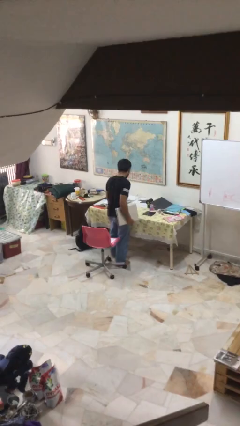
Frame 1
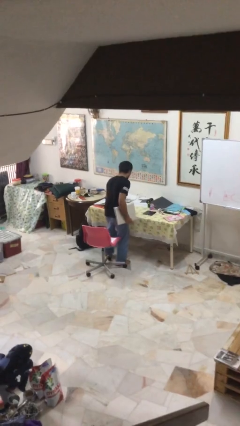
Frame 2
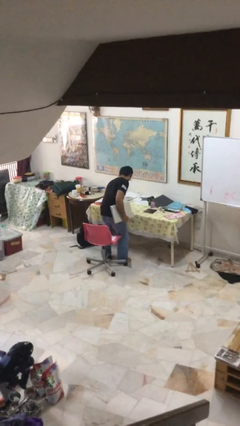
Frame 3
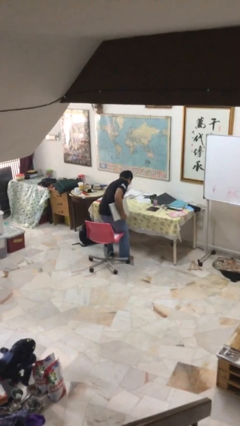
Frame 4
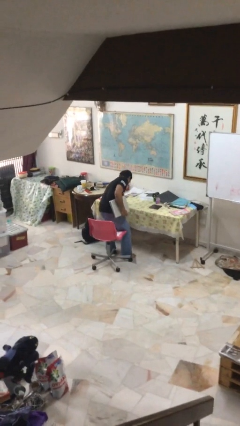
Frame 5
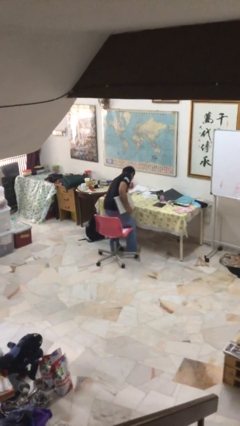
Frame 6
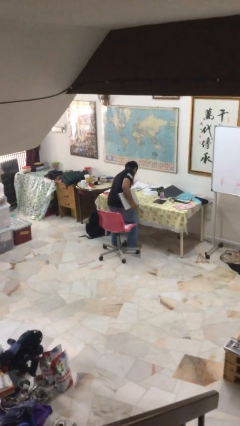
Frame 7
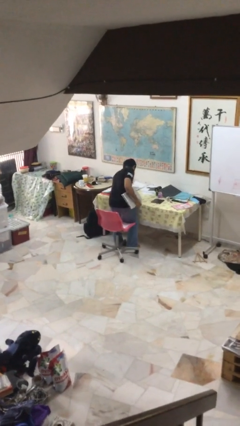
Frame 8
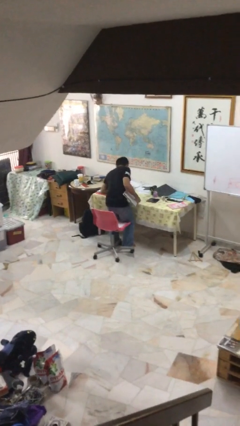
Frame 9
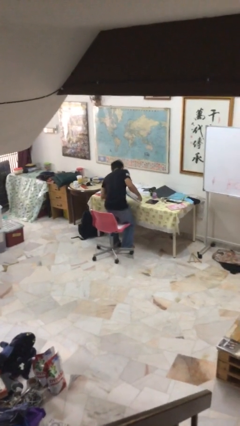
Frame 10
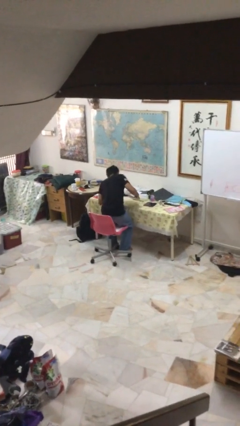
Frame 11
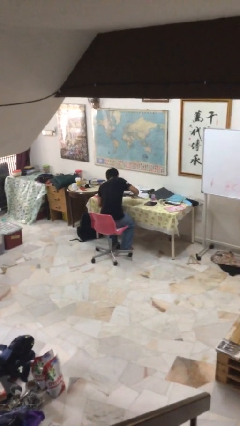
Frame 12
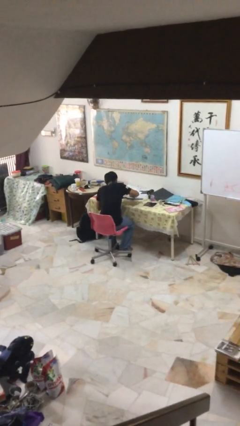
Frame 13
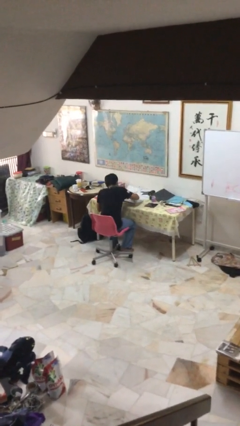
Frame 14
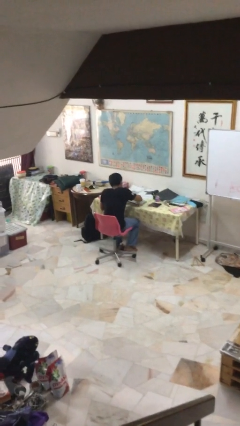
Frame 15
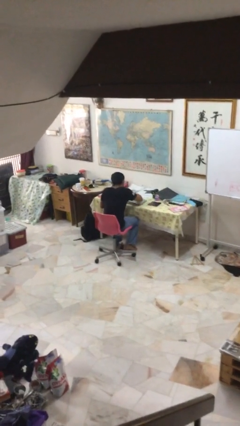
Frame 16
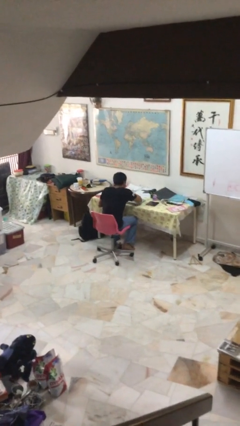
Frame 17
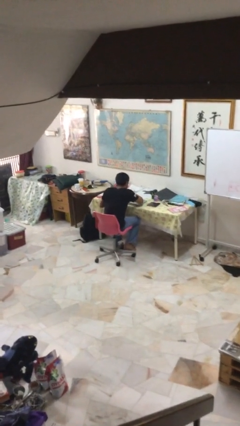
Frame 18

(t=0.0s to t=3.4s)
person sits down

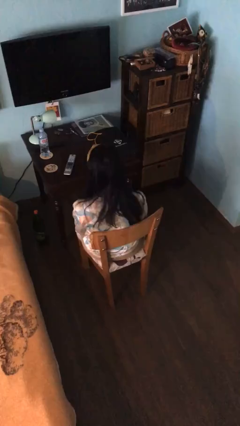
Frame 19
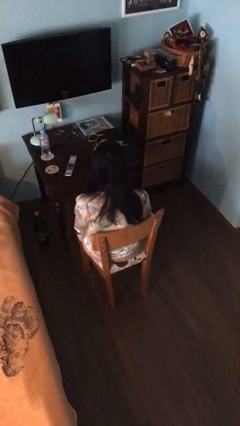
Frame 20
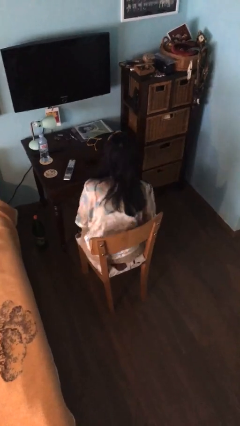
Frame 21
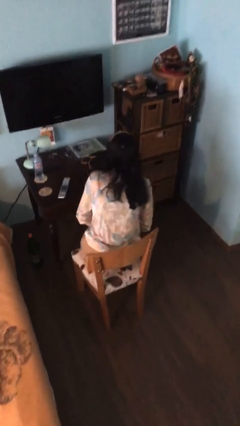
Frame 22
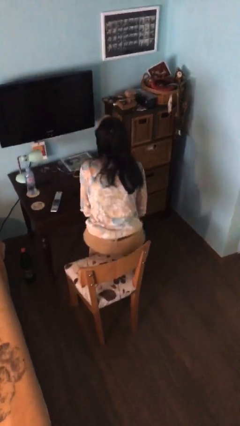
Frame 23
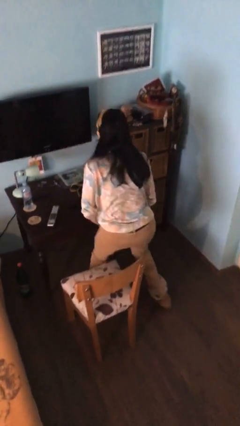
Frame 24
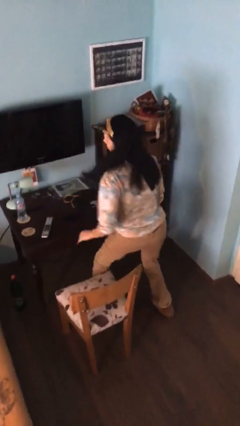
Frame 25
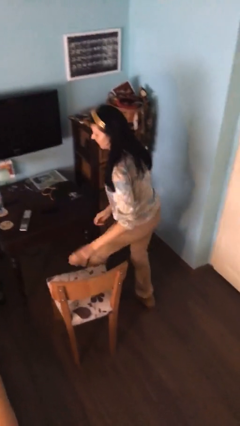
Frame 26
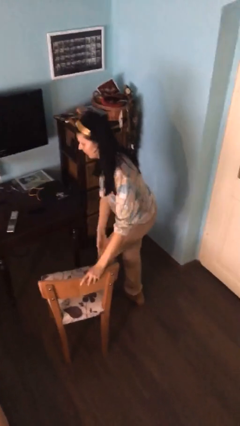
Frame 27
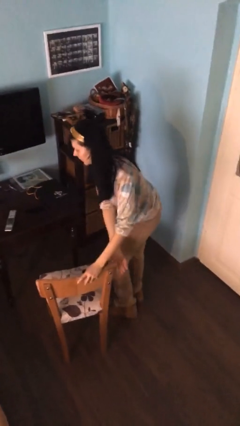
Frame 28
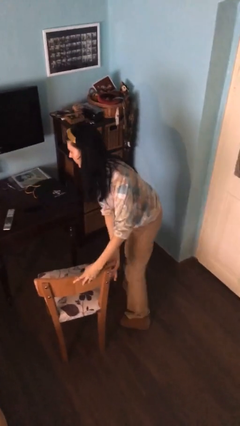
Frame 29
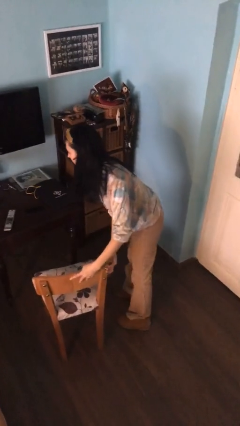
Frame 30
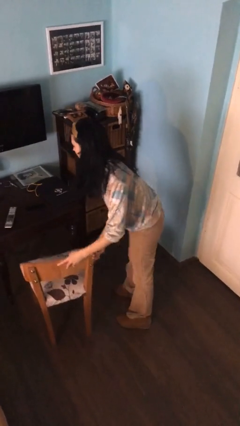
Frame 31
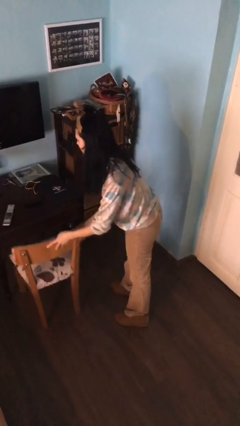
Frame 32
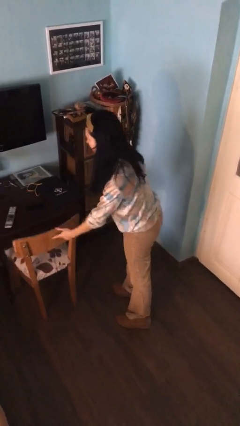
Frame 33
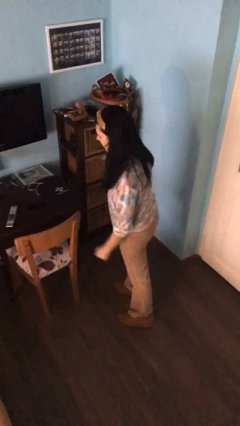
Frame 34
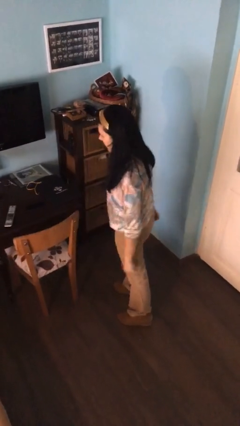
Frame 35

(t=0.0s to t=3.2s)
person stands up

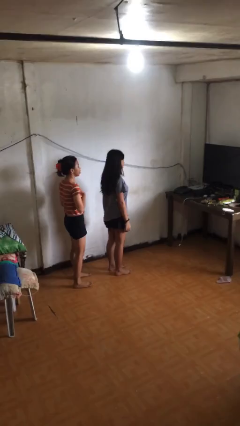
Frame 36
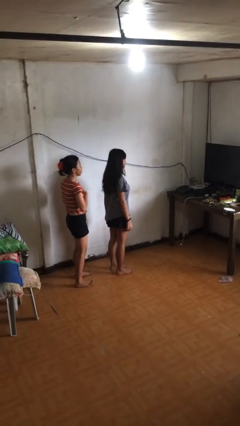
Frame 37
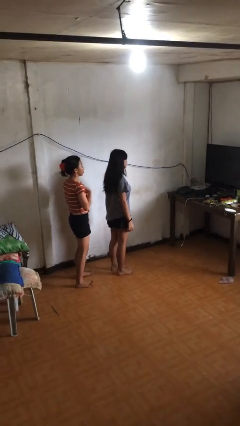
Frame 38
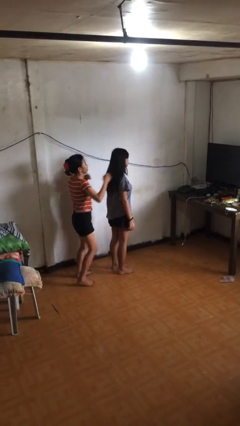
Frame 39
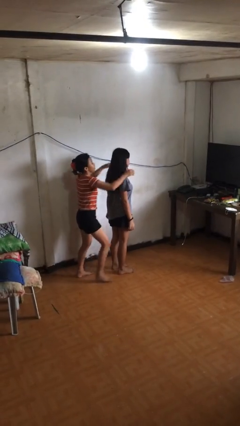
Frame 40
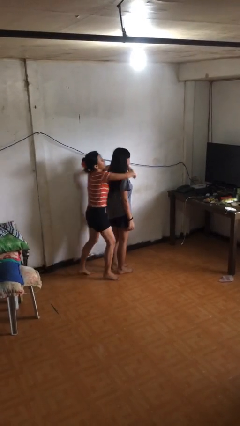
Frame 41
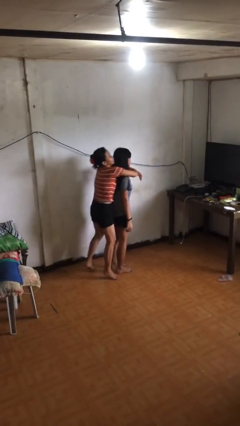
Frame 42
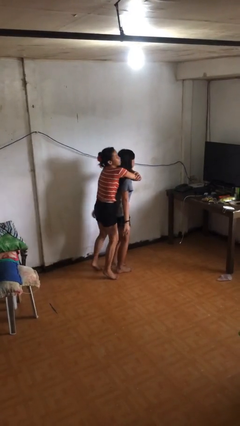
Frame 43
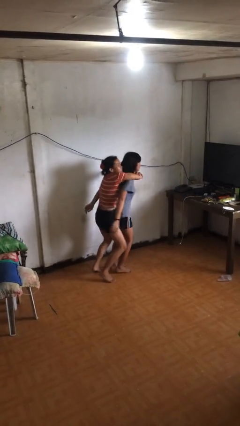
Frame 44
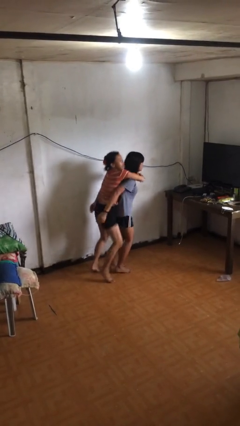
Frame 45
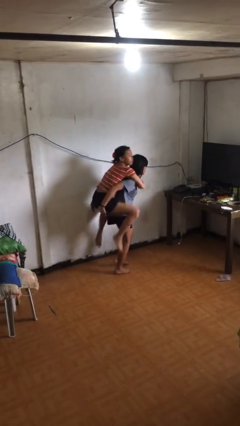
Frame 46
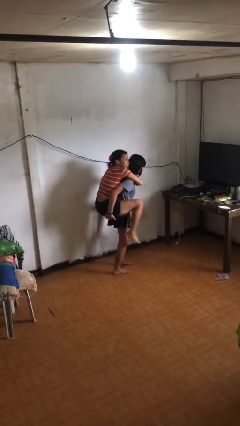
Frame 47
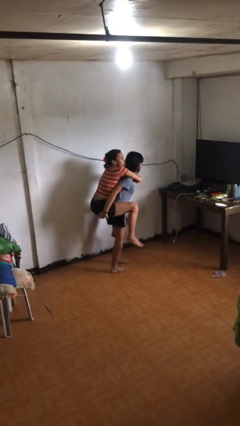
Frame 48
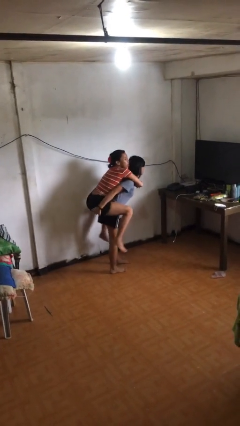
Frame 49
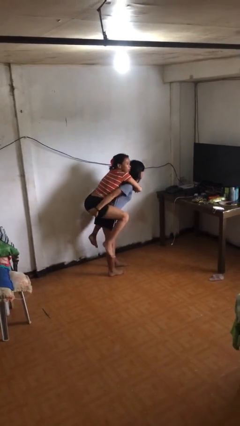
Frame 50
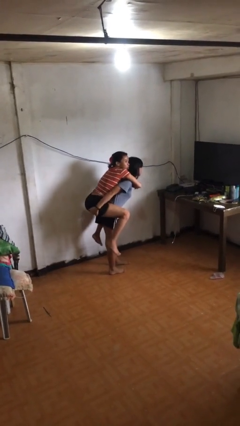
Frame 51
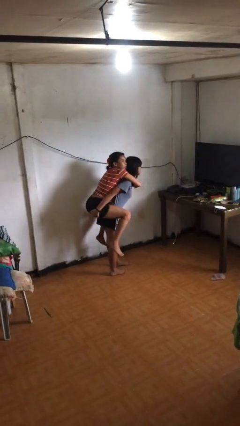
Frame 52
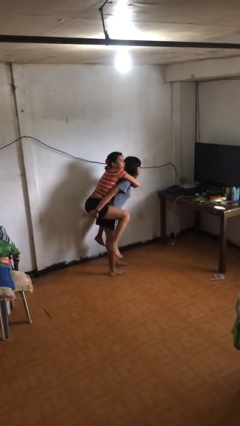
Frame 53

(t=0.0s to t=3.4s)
person carries person over shoulder

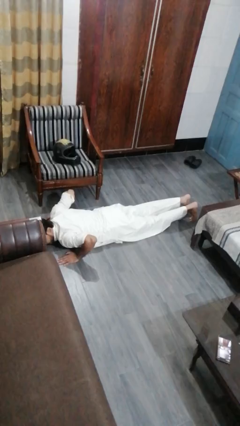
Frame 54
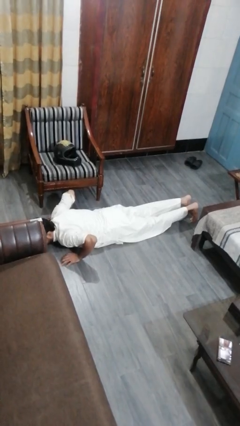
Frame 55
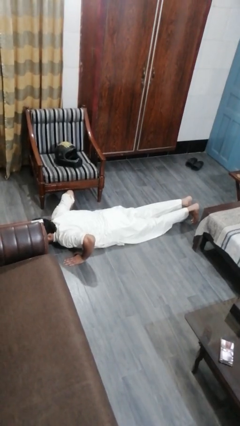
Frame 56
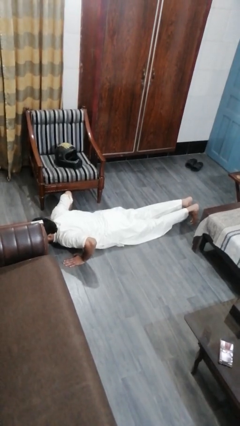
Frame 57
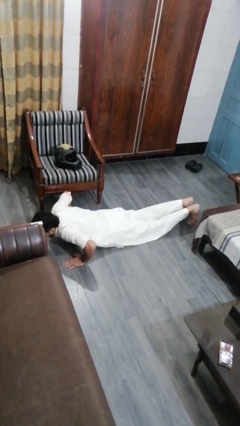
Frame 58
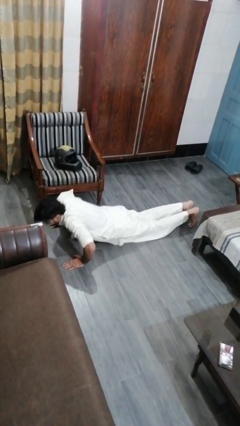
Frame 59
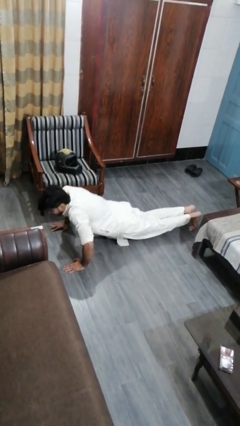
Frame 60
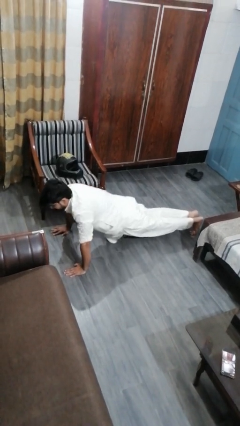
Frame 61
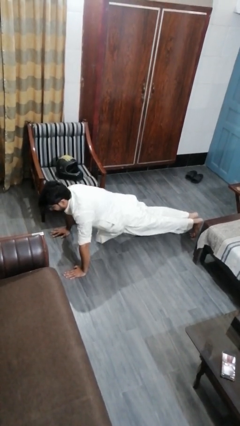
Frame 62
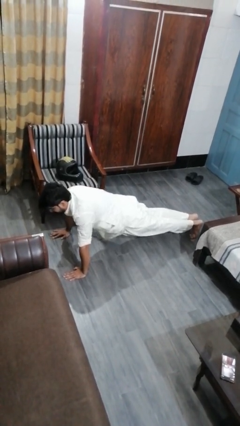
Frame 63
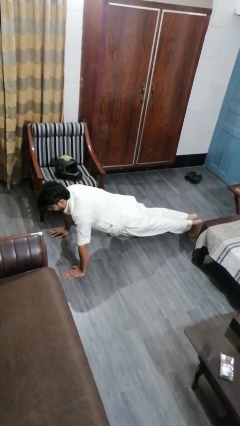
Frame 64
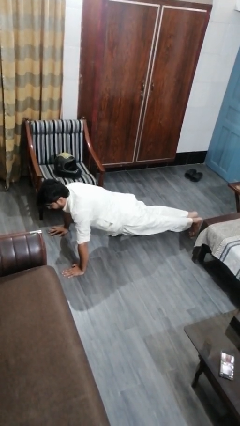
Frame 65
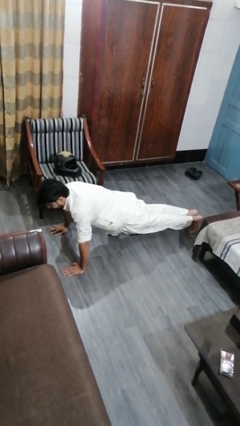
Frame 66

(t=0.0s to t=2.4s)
person exercises with pushup

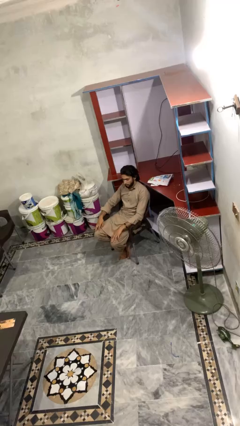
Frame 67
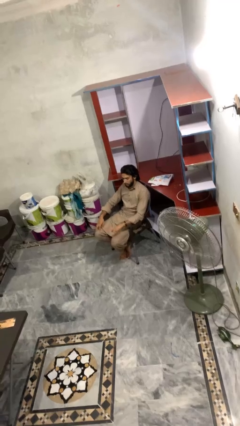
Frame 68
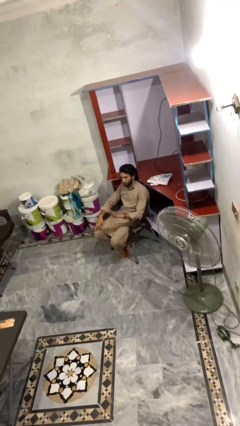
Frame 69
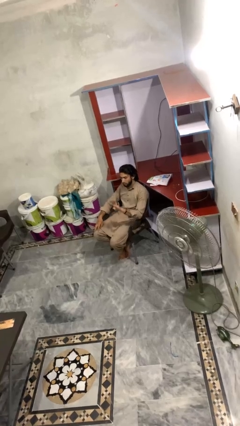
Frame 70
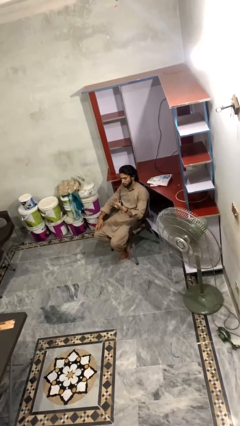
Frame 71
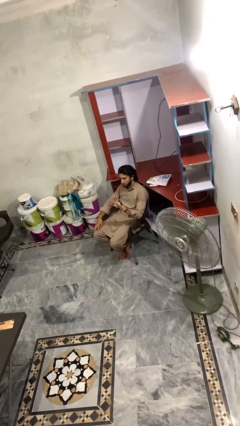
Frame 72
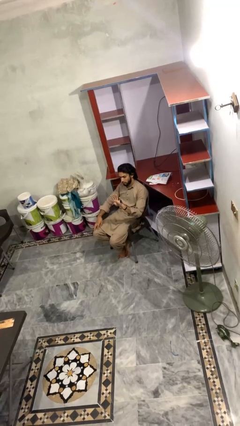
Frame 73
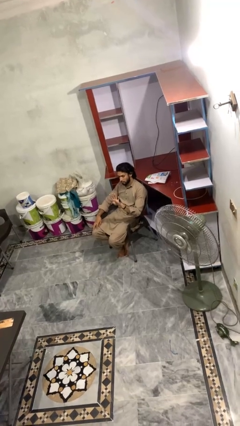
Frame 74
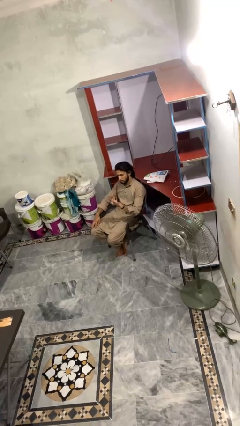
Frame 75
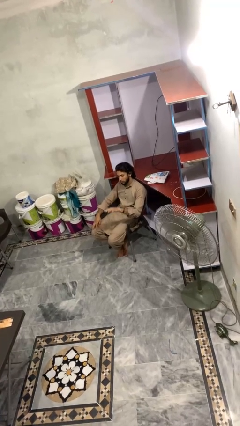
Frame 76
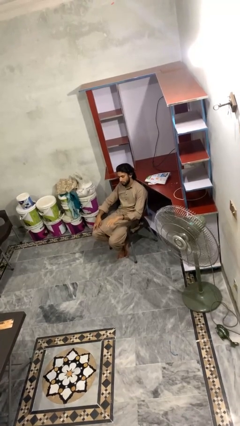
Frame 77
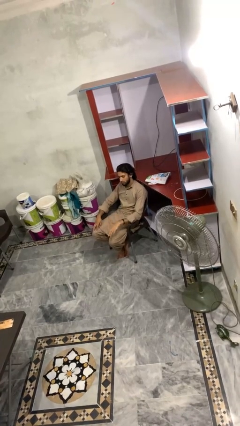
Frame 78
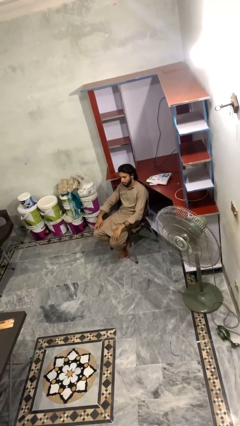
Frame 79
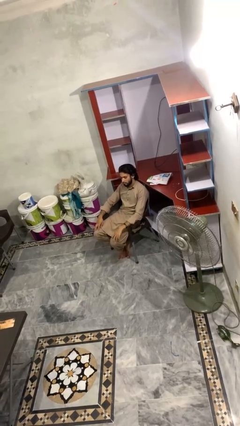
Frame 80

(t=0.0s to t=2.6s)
person gestures number four

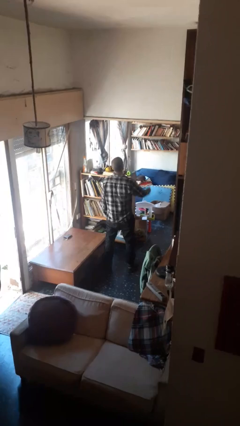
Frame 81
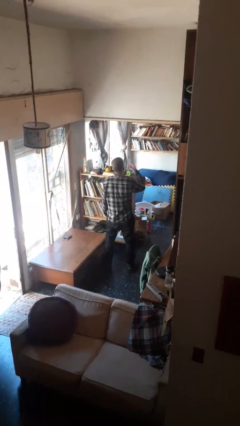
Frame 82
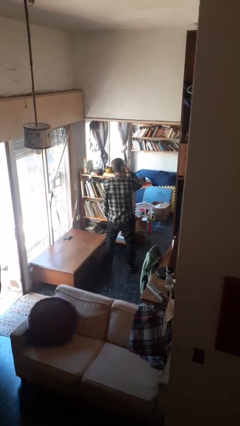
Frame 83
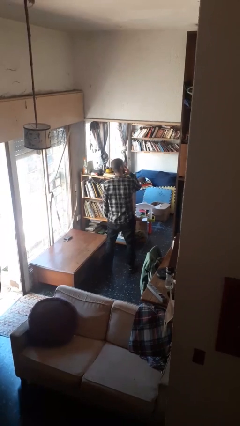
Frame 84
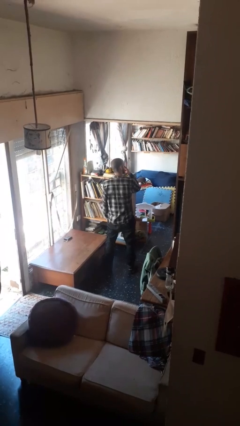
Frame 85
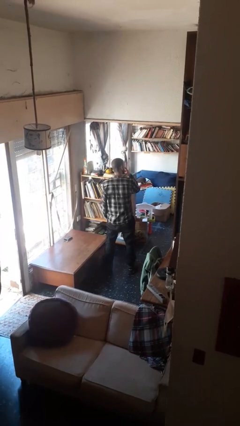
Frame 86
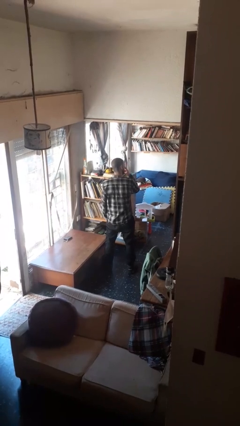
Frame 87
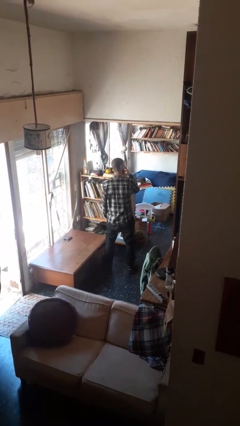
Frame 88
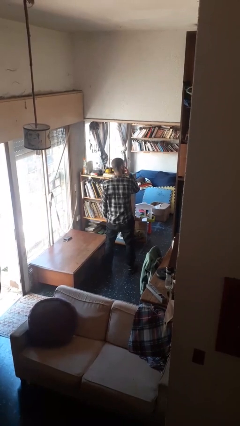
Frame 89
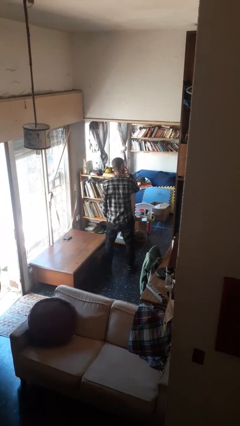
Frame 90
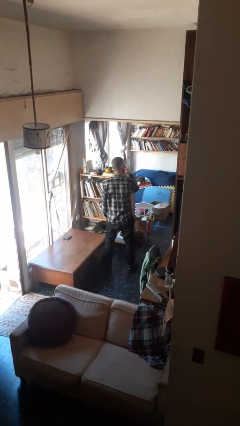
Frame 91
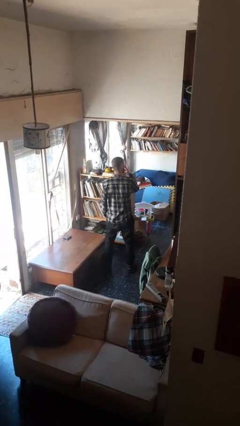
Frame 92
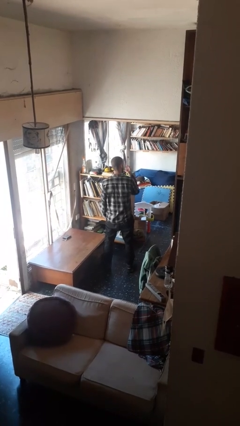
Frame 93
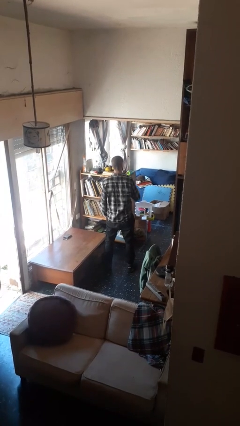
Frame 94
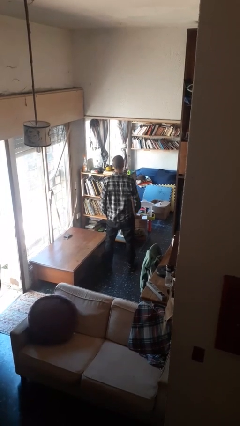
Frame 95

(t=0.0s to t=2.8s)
person gestures watch closely
